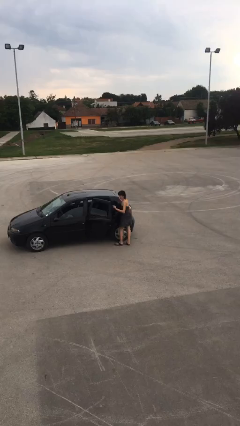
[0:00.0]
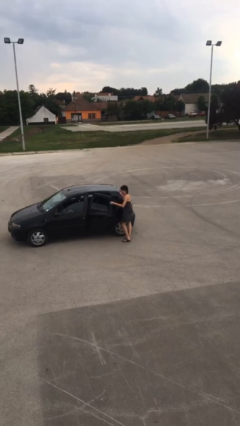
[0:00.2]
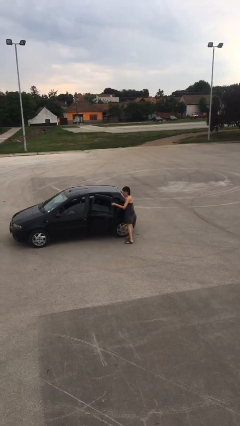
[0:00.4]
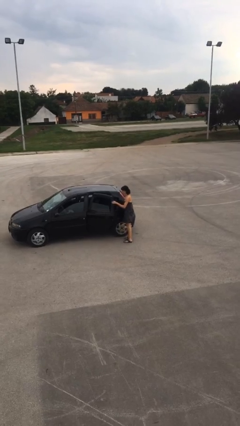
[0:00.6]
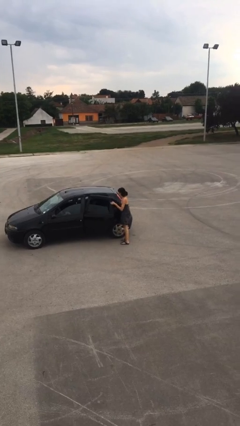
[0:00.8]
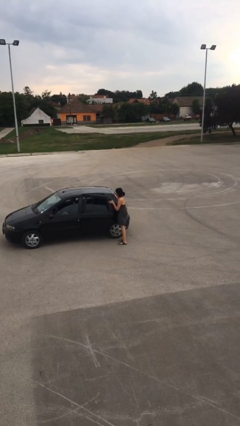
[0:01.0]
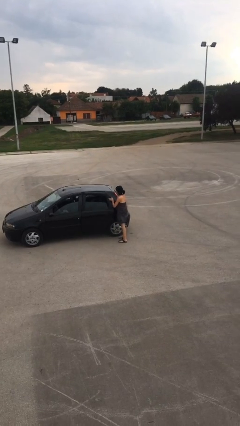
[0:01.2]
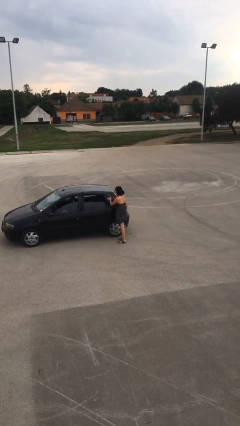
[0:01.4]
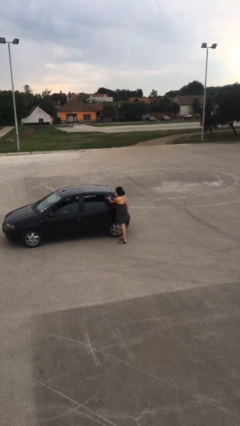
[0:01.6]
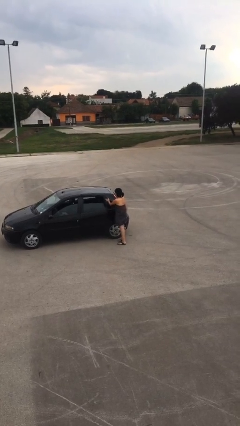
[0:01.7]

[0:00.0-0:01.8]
person closes car door

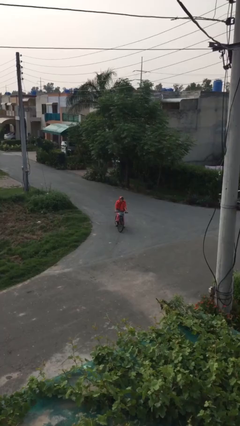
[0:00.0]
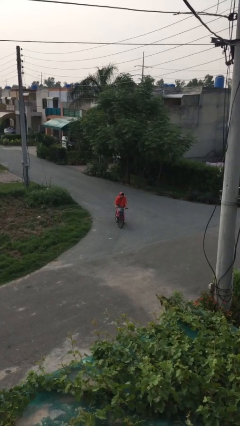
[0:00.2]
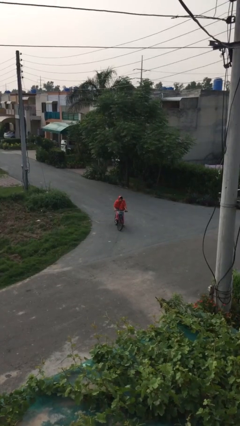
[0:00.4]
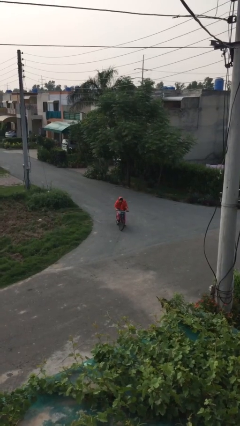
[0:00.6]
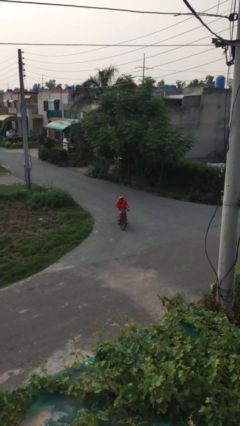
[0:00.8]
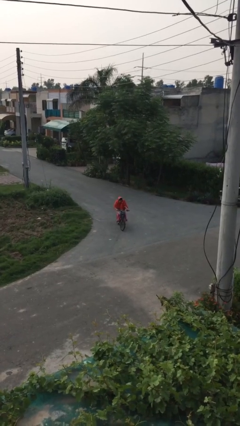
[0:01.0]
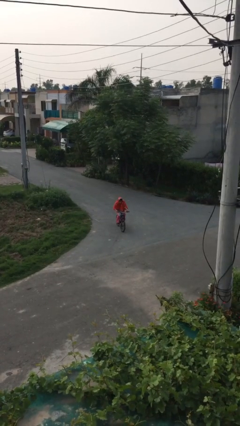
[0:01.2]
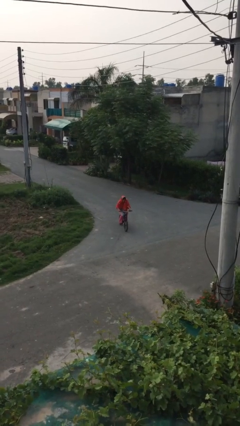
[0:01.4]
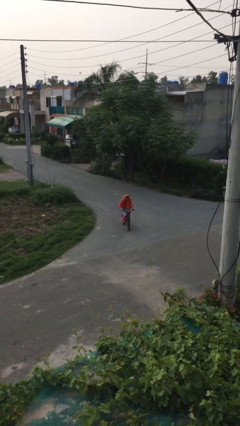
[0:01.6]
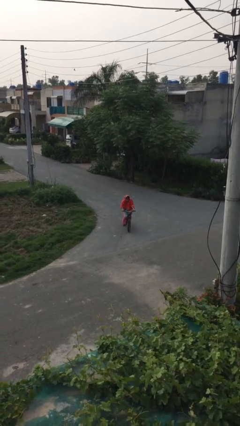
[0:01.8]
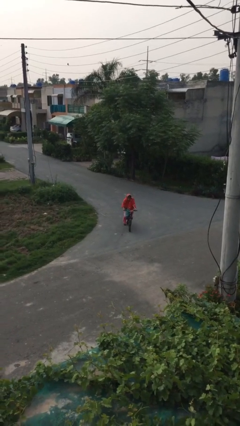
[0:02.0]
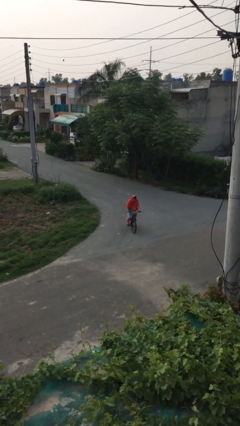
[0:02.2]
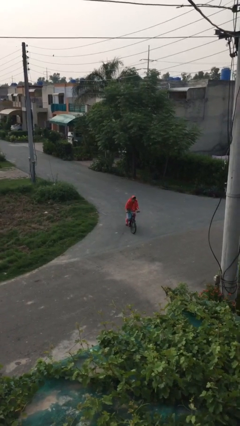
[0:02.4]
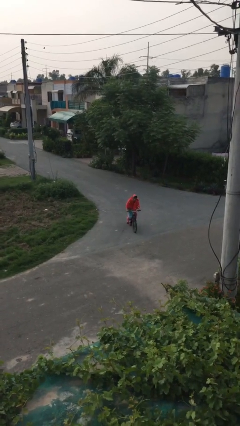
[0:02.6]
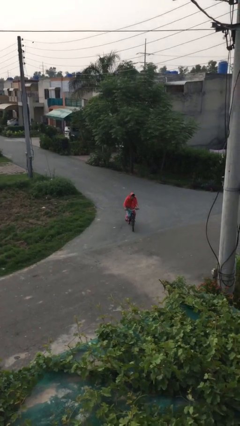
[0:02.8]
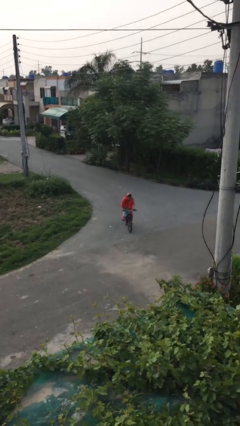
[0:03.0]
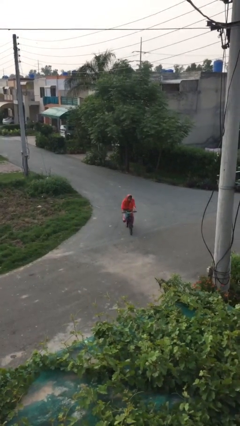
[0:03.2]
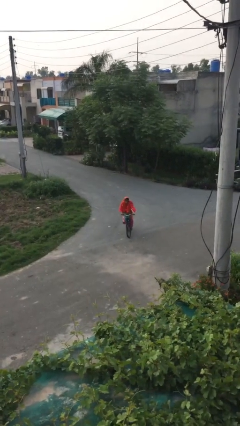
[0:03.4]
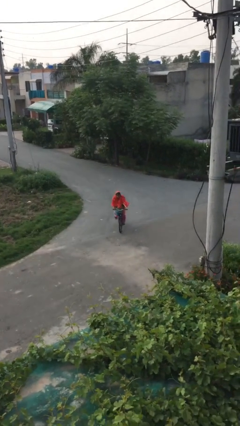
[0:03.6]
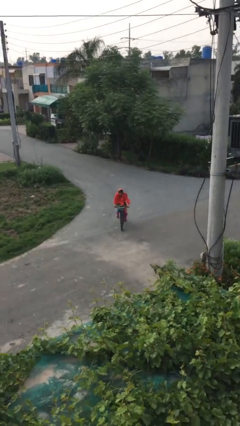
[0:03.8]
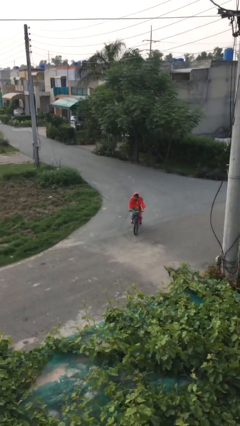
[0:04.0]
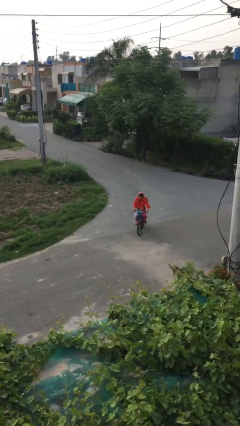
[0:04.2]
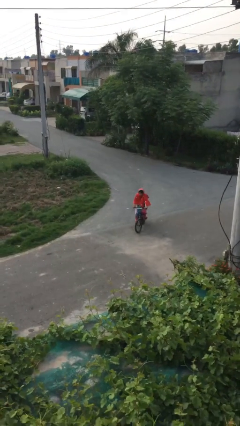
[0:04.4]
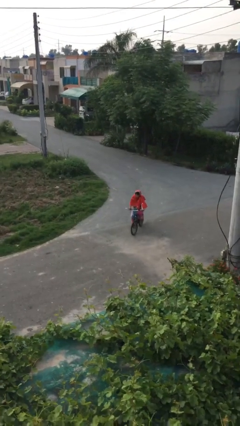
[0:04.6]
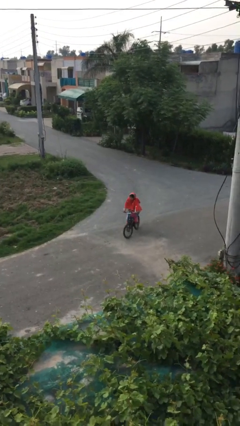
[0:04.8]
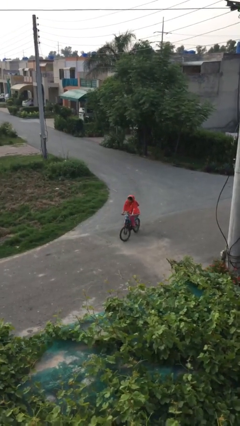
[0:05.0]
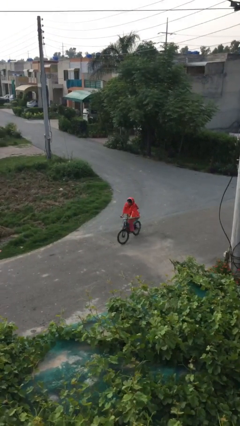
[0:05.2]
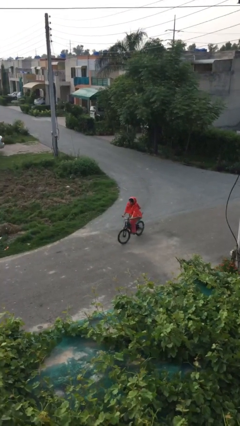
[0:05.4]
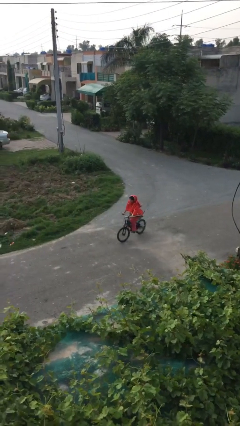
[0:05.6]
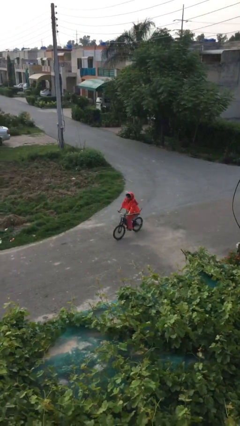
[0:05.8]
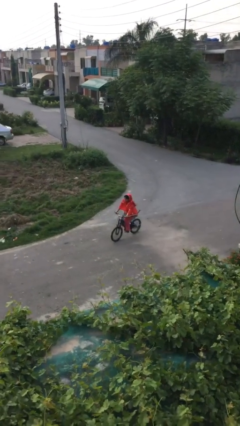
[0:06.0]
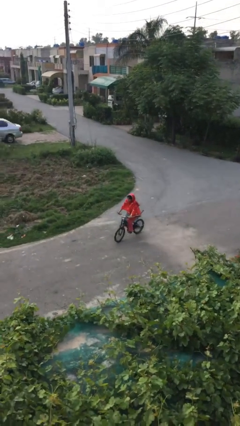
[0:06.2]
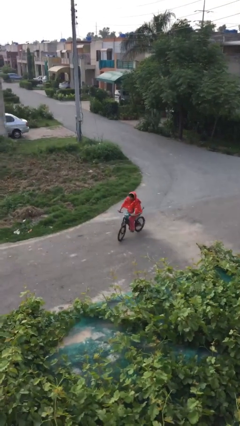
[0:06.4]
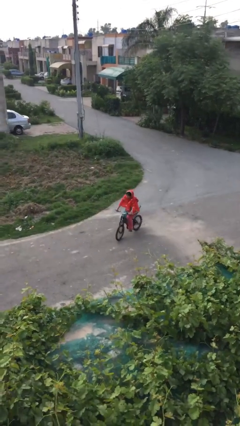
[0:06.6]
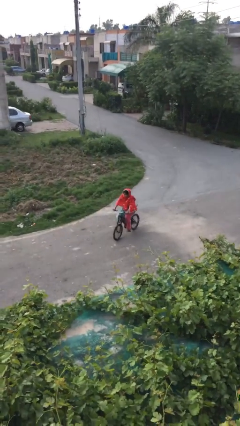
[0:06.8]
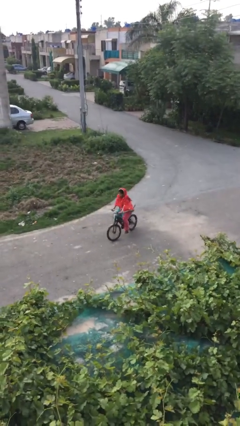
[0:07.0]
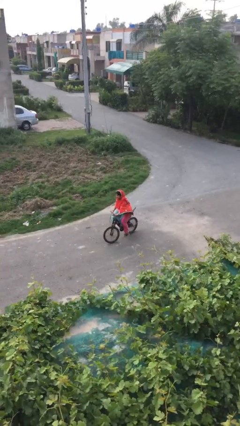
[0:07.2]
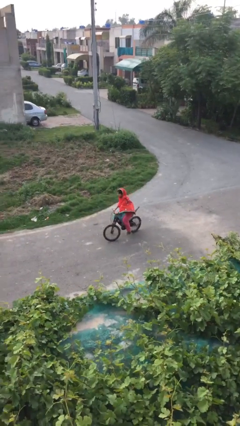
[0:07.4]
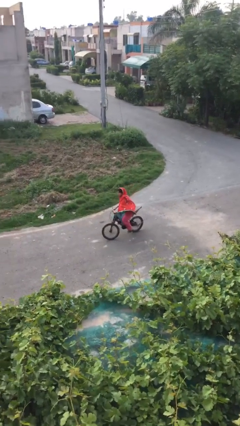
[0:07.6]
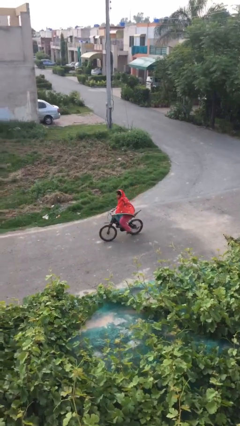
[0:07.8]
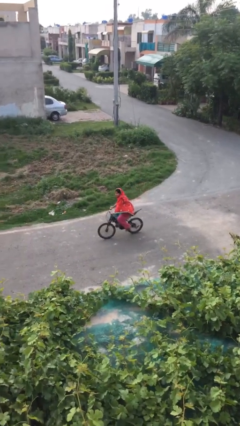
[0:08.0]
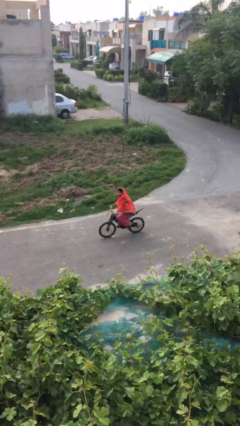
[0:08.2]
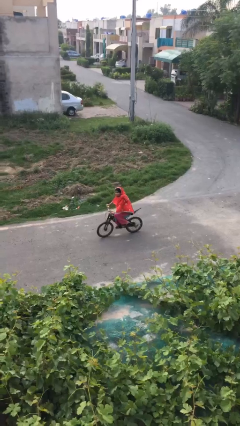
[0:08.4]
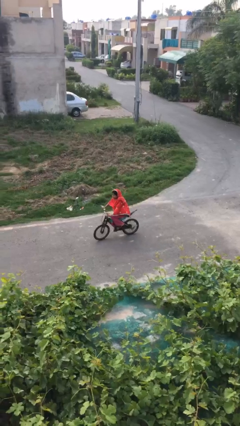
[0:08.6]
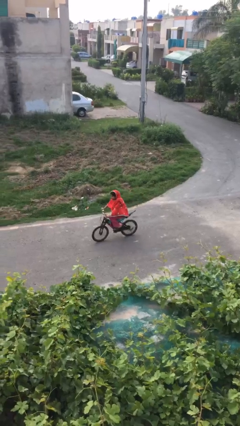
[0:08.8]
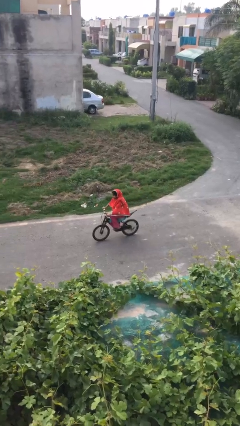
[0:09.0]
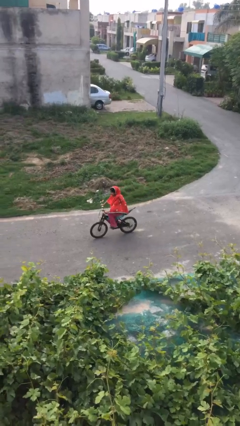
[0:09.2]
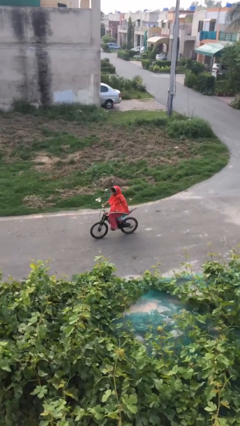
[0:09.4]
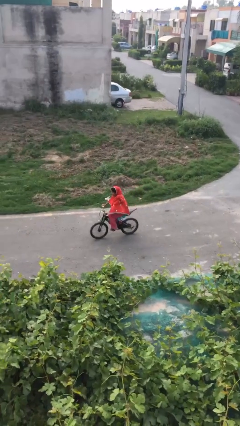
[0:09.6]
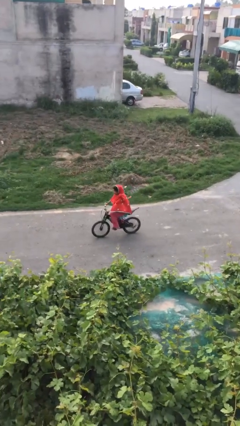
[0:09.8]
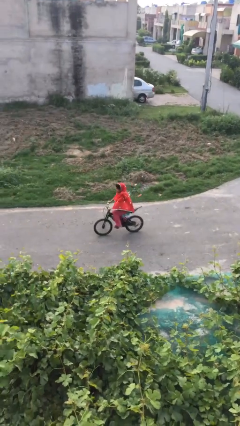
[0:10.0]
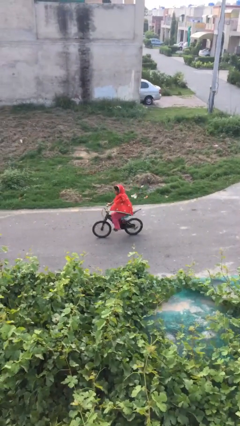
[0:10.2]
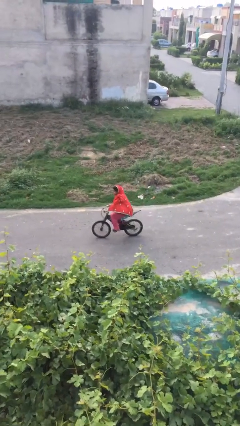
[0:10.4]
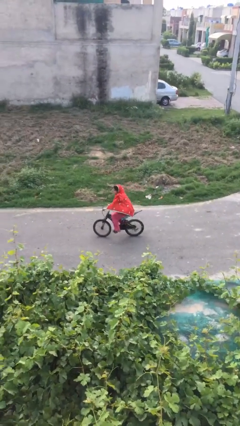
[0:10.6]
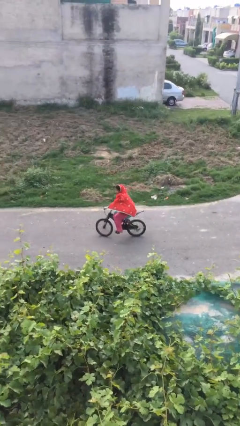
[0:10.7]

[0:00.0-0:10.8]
person rides bicycle

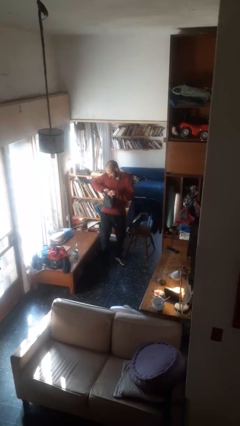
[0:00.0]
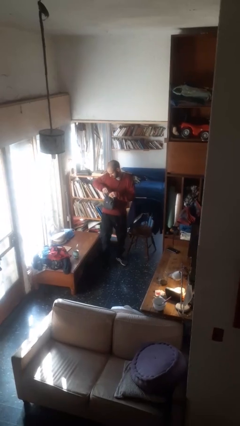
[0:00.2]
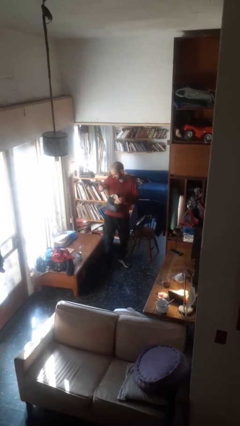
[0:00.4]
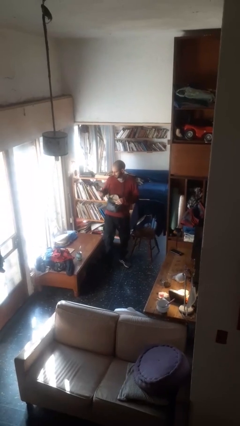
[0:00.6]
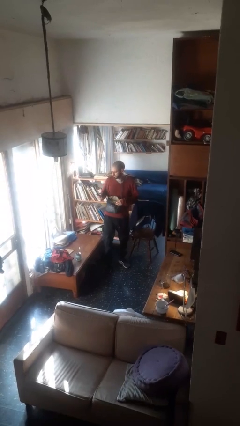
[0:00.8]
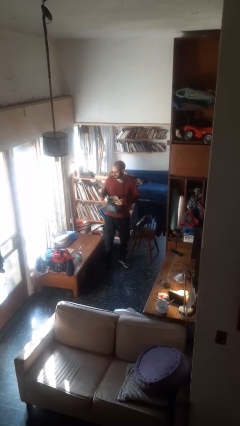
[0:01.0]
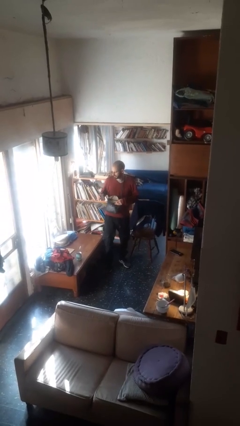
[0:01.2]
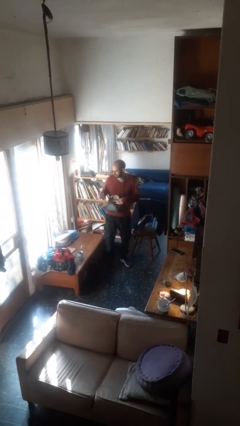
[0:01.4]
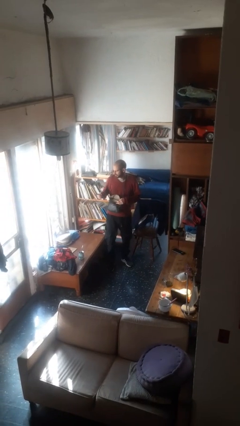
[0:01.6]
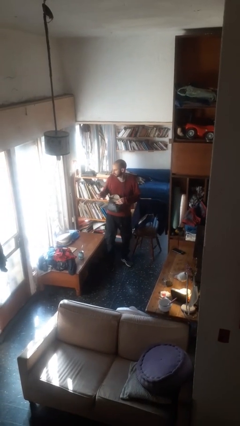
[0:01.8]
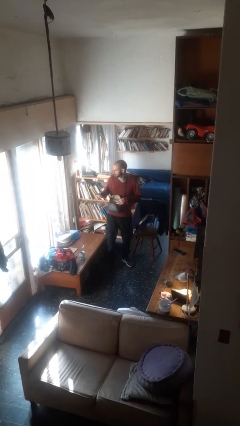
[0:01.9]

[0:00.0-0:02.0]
person takes object from purse

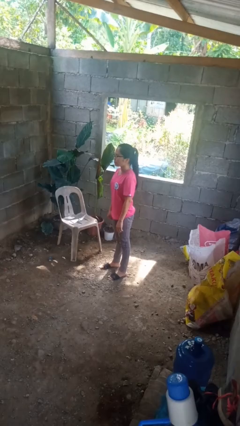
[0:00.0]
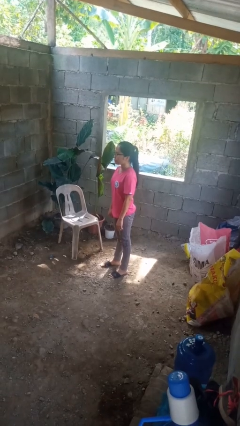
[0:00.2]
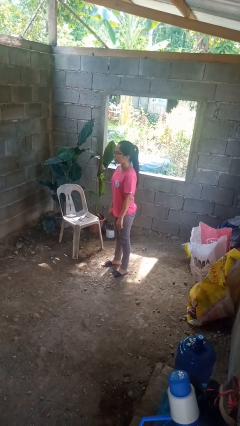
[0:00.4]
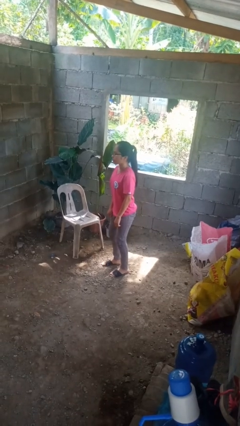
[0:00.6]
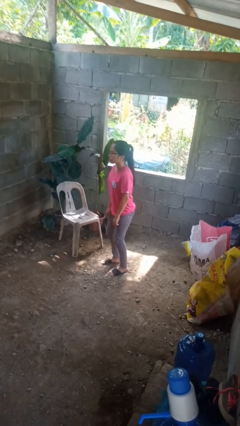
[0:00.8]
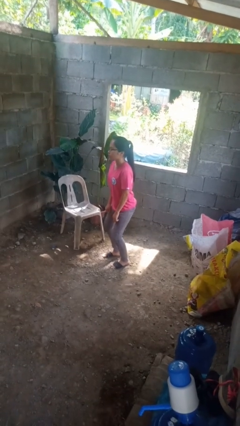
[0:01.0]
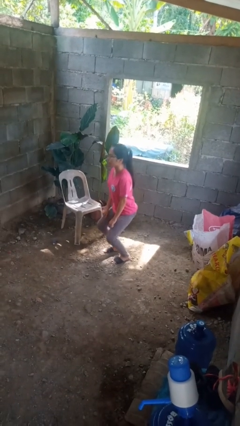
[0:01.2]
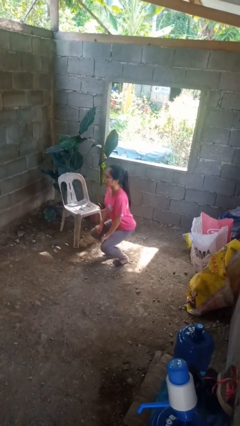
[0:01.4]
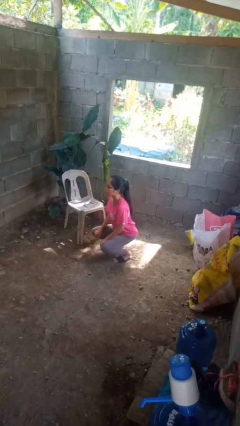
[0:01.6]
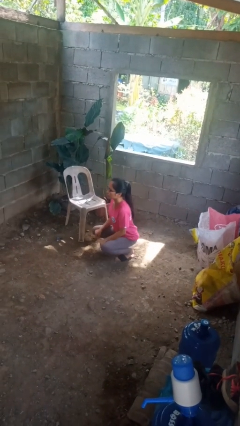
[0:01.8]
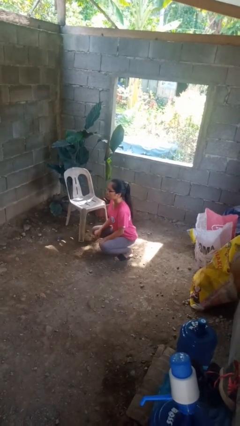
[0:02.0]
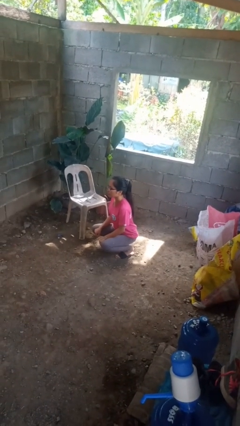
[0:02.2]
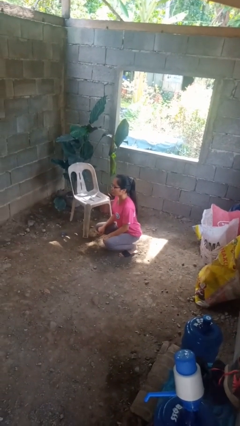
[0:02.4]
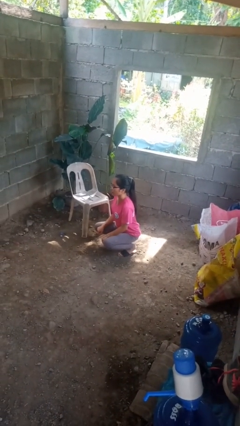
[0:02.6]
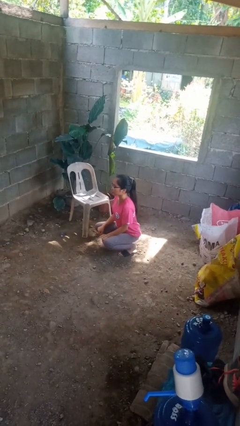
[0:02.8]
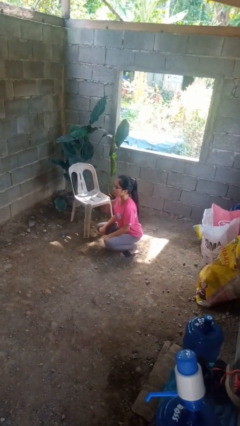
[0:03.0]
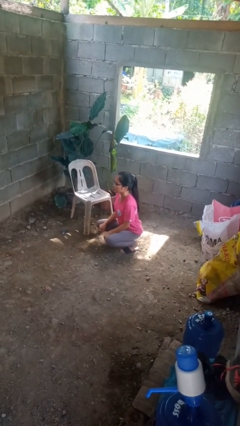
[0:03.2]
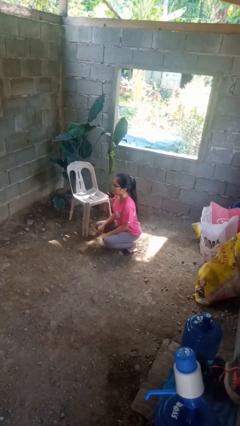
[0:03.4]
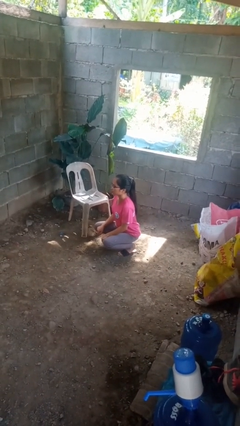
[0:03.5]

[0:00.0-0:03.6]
person squats
